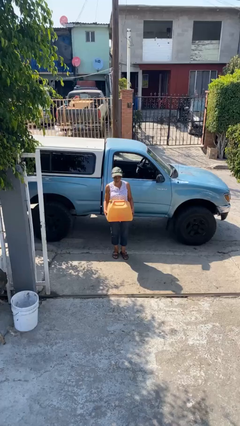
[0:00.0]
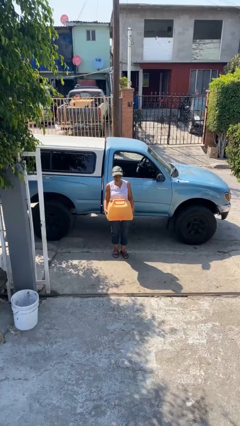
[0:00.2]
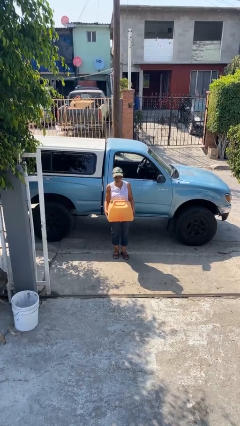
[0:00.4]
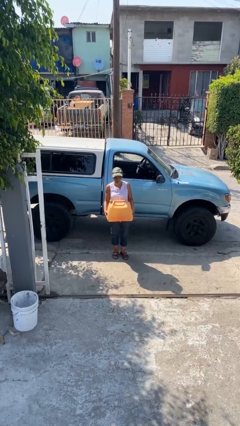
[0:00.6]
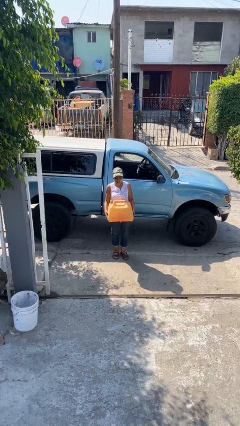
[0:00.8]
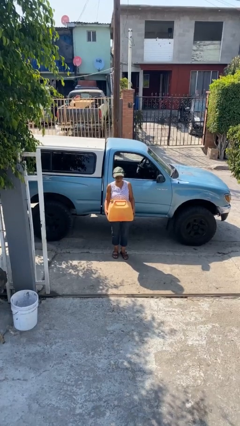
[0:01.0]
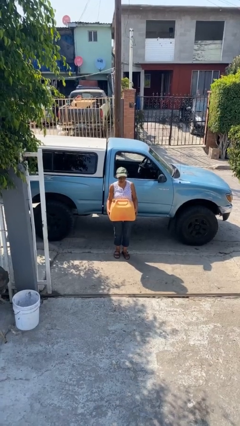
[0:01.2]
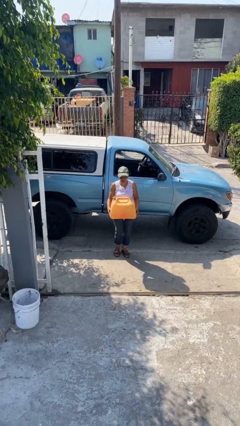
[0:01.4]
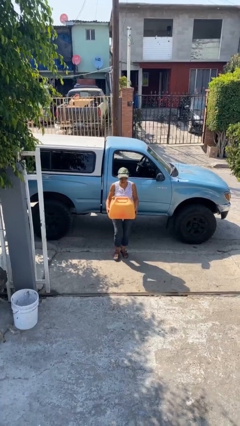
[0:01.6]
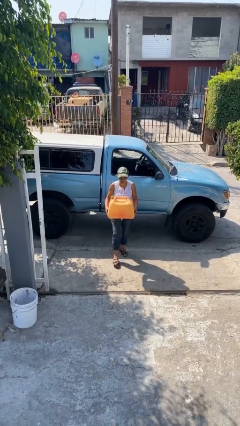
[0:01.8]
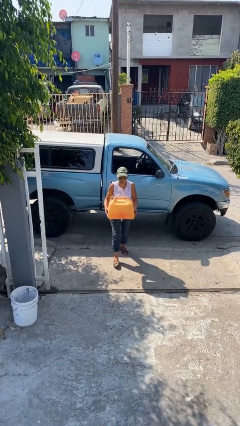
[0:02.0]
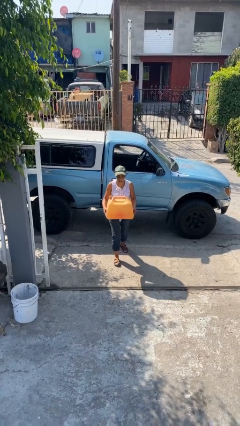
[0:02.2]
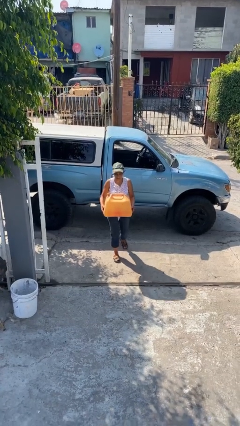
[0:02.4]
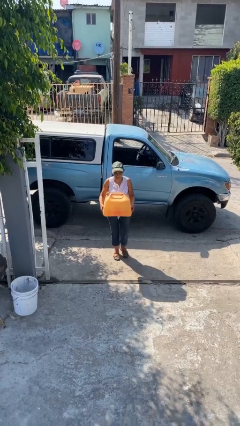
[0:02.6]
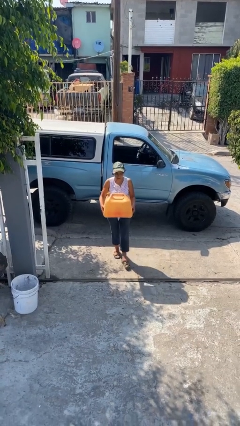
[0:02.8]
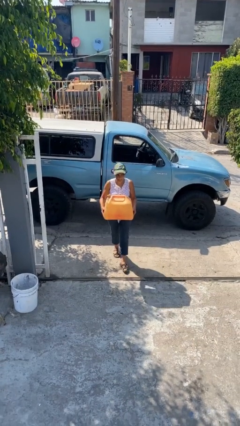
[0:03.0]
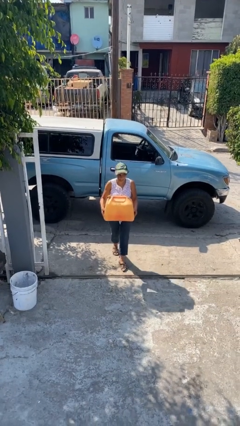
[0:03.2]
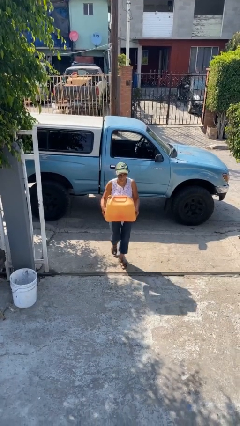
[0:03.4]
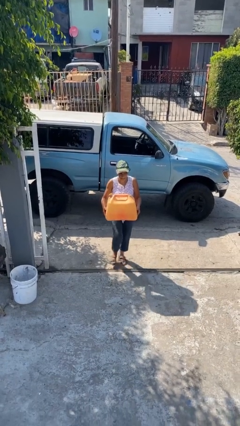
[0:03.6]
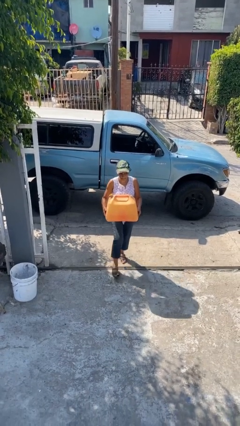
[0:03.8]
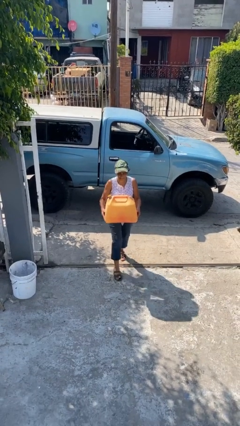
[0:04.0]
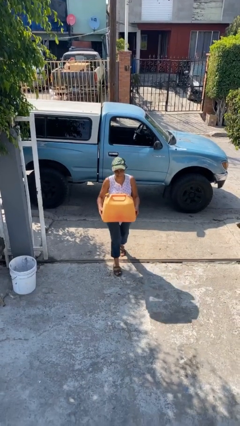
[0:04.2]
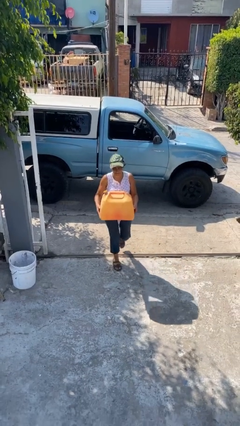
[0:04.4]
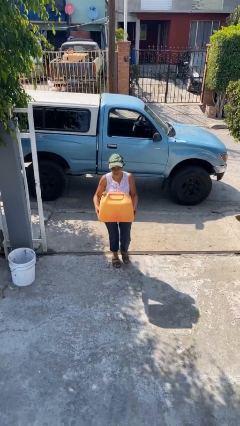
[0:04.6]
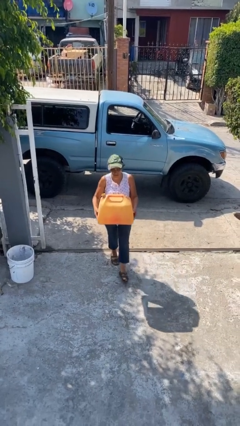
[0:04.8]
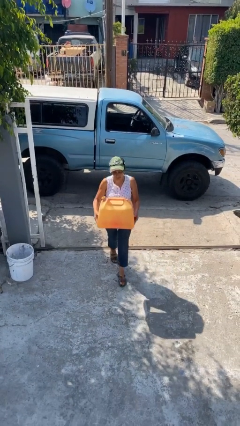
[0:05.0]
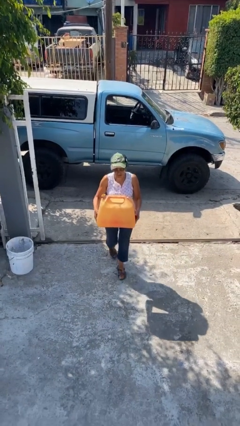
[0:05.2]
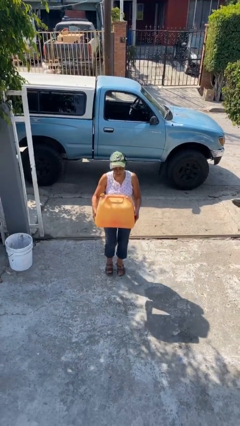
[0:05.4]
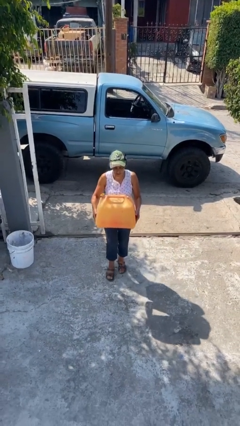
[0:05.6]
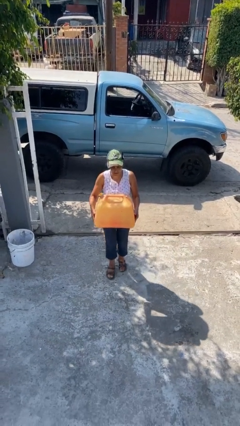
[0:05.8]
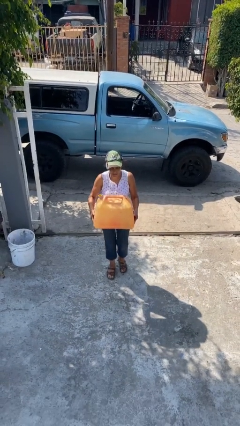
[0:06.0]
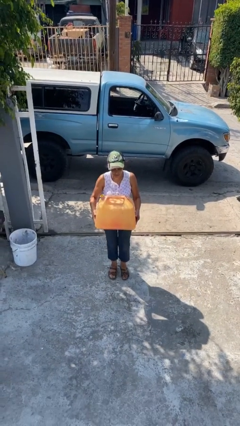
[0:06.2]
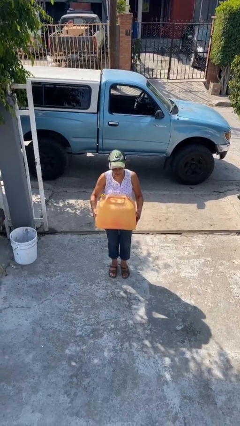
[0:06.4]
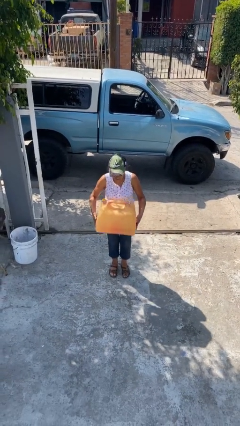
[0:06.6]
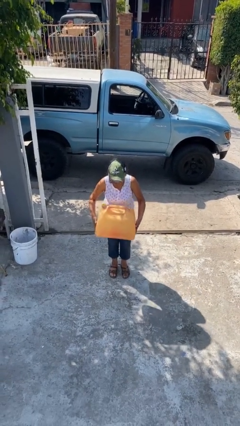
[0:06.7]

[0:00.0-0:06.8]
person carries heavy object

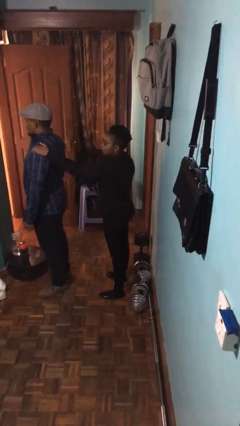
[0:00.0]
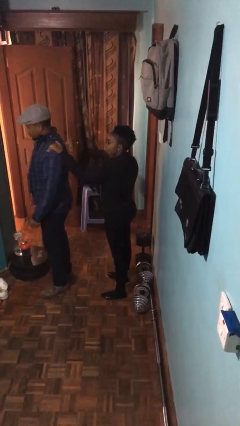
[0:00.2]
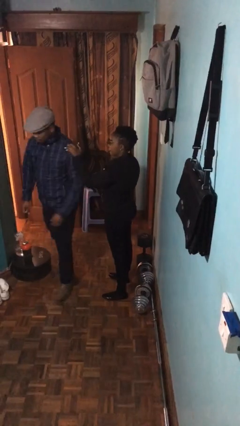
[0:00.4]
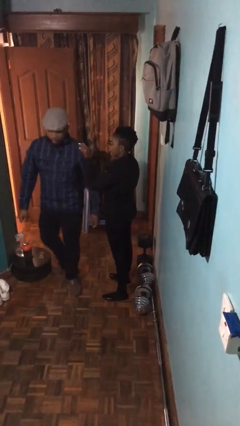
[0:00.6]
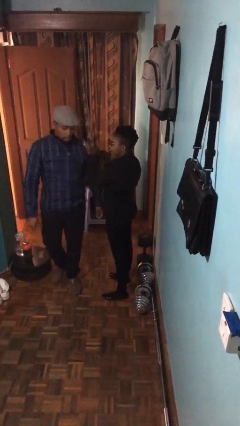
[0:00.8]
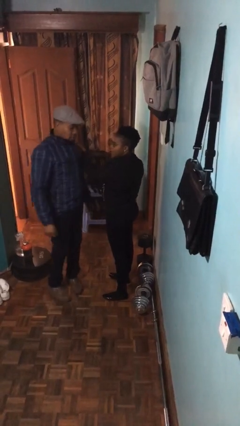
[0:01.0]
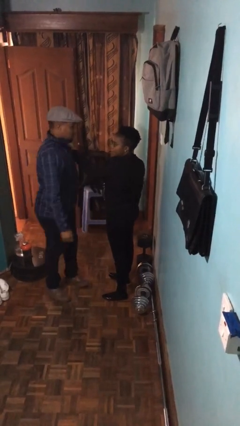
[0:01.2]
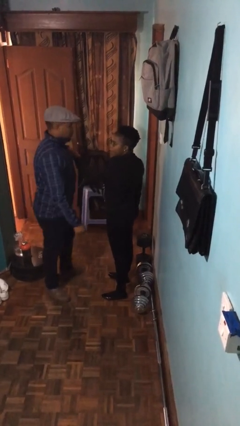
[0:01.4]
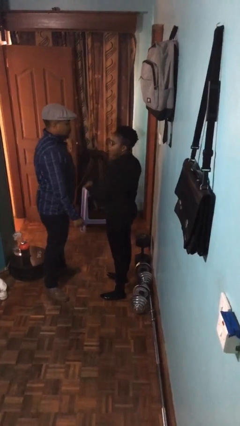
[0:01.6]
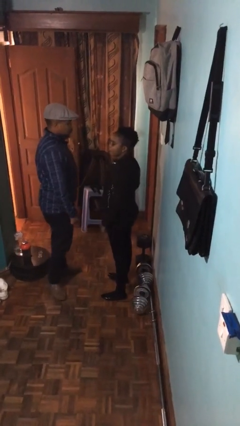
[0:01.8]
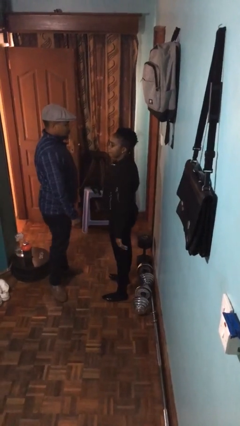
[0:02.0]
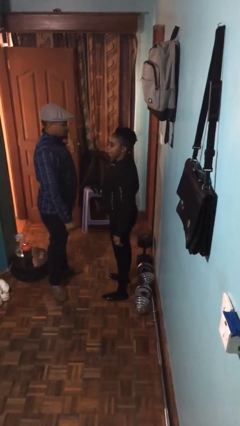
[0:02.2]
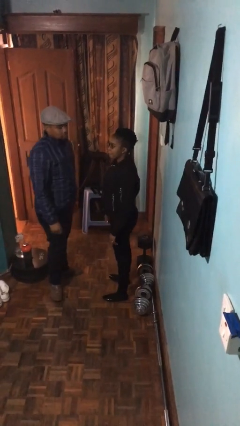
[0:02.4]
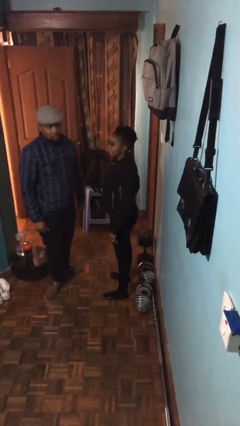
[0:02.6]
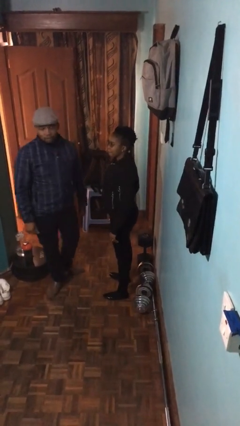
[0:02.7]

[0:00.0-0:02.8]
person spins person around

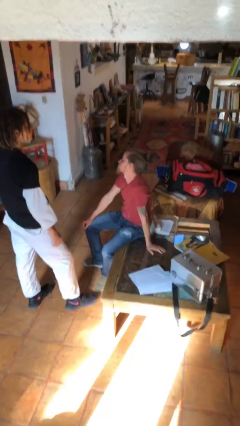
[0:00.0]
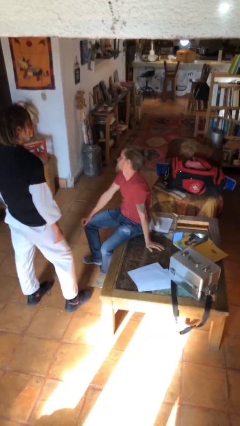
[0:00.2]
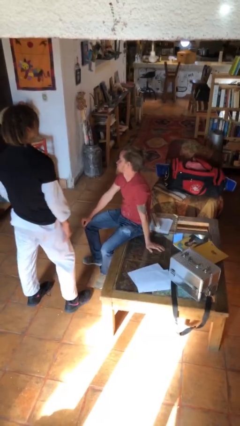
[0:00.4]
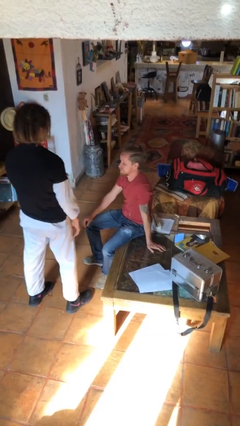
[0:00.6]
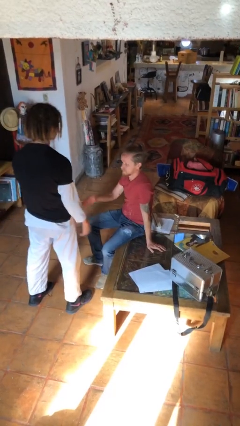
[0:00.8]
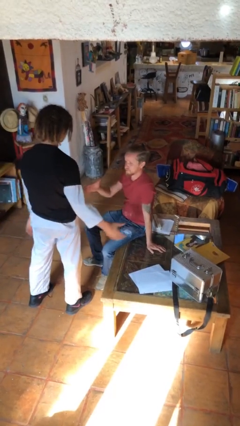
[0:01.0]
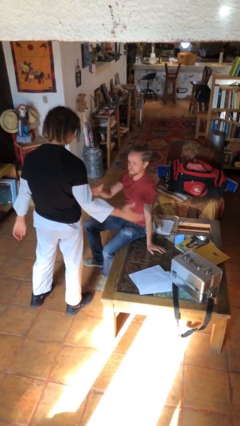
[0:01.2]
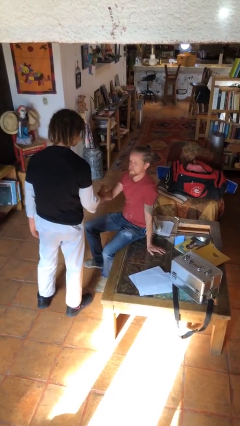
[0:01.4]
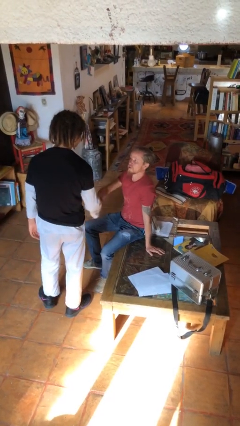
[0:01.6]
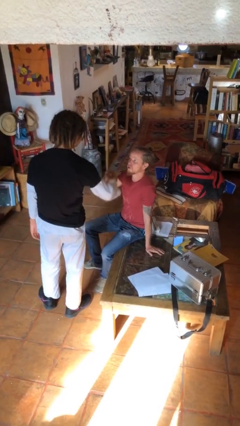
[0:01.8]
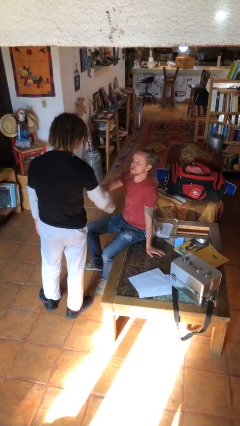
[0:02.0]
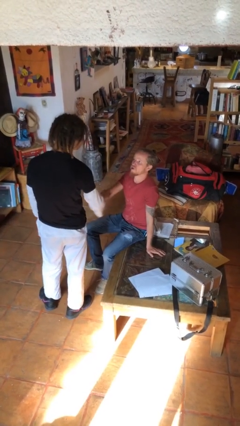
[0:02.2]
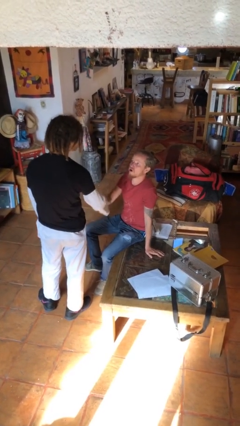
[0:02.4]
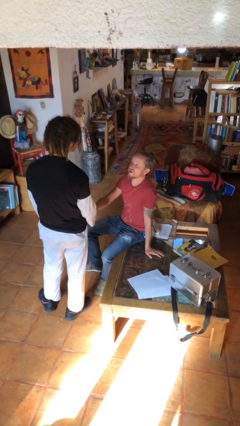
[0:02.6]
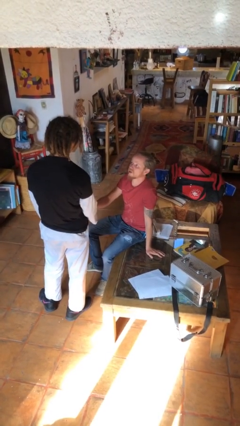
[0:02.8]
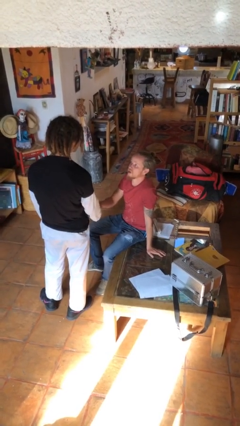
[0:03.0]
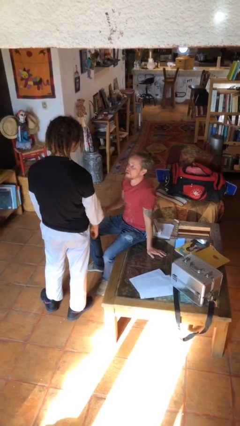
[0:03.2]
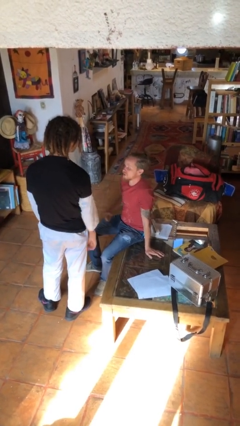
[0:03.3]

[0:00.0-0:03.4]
person shakes hand

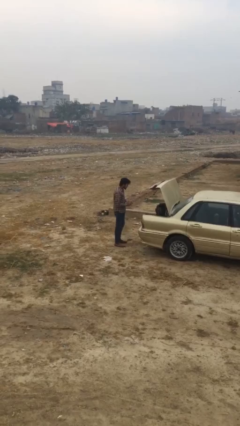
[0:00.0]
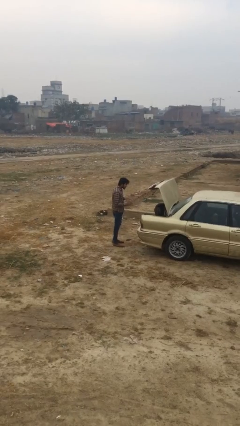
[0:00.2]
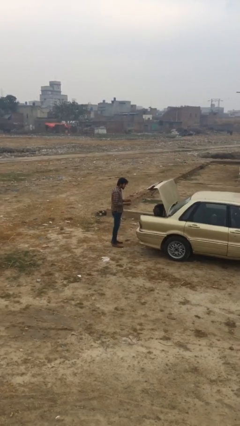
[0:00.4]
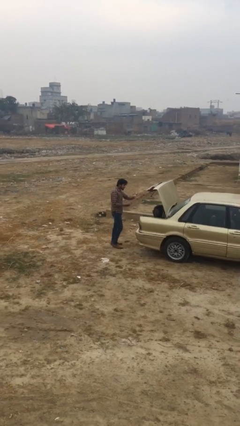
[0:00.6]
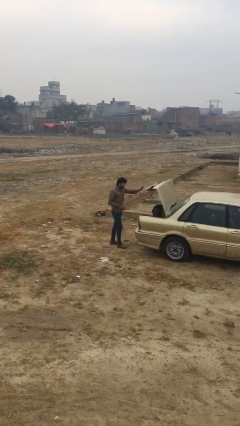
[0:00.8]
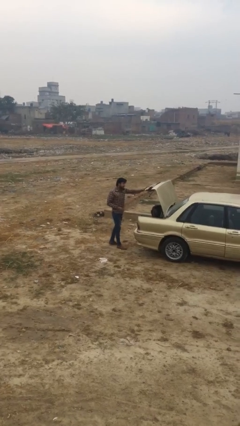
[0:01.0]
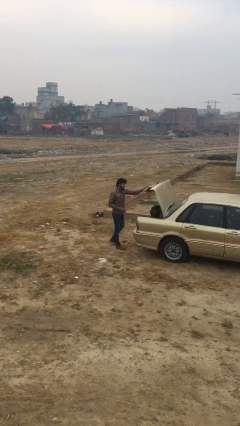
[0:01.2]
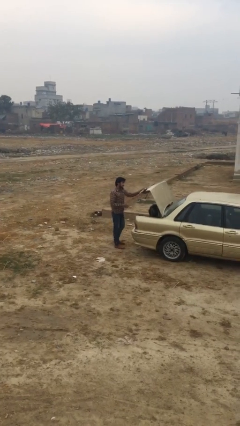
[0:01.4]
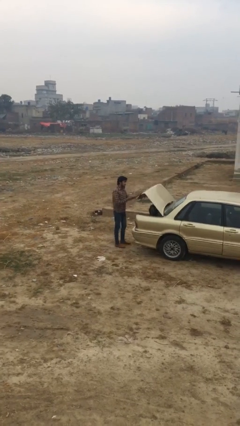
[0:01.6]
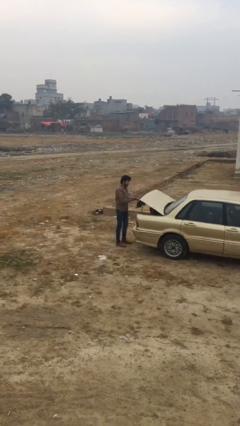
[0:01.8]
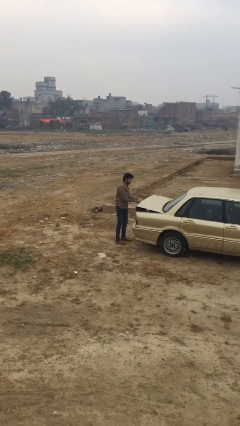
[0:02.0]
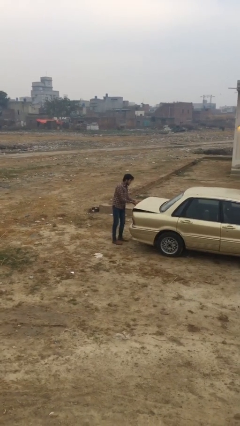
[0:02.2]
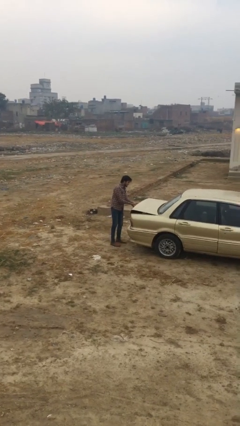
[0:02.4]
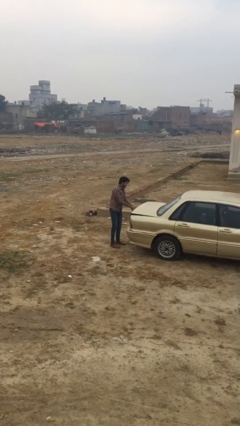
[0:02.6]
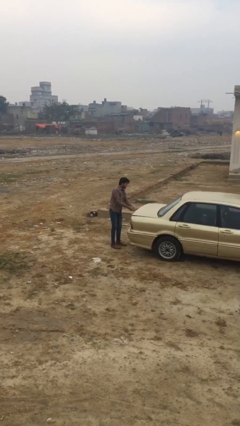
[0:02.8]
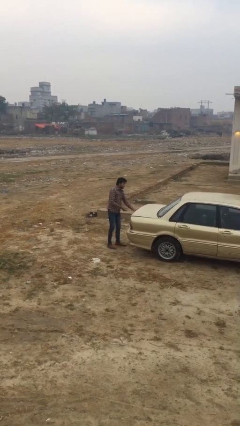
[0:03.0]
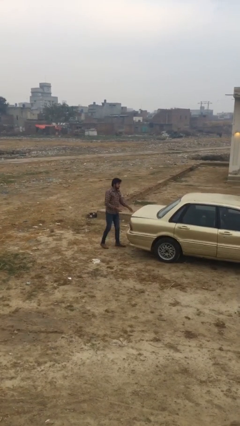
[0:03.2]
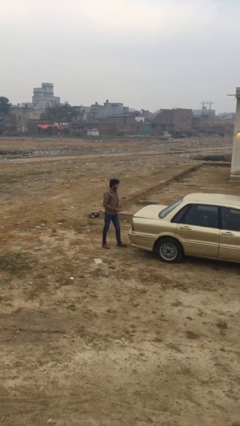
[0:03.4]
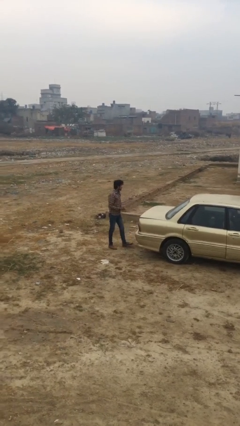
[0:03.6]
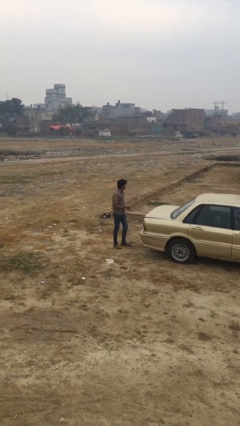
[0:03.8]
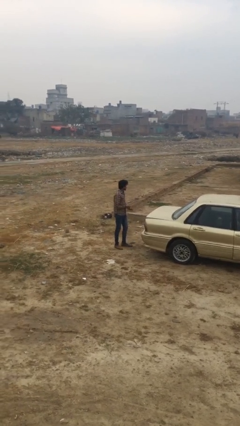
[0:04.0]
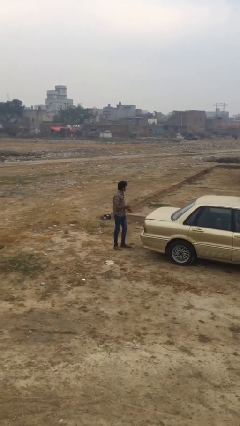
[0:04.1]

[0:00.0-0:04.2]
person closes car trunk
